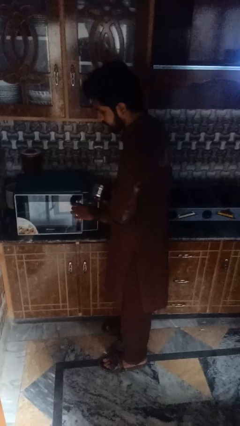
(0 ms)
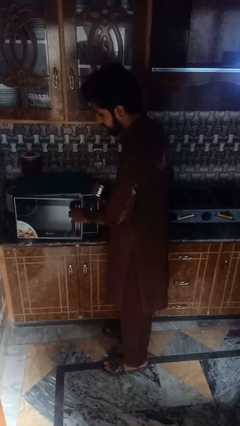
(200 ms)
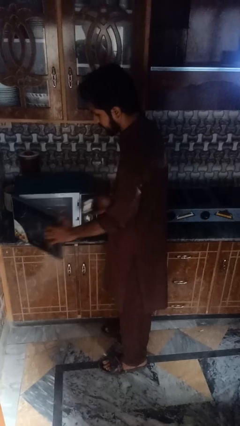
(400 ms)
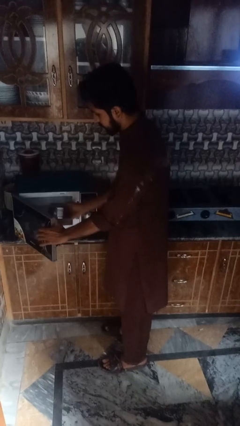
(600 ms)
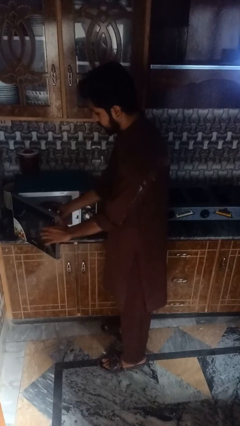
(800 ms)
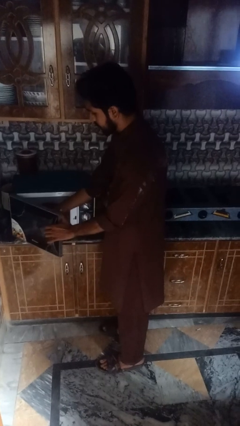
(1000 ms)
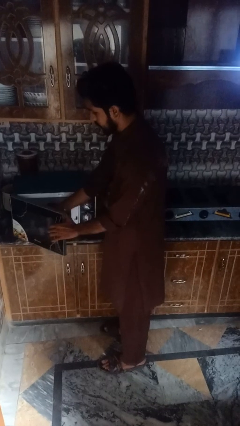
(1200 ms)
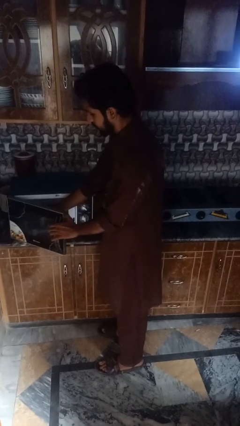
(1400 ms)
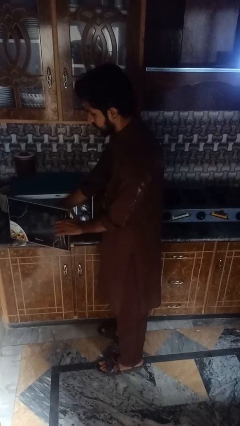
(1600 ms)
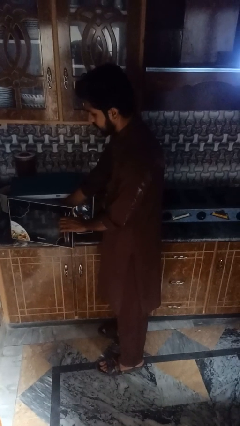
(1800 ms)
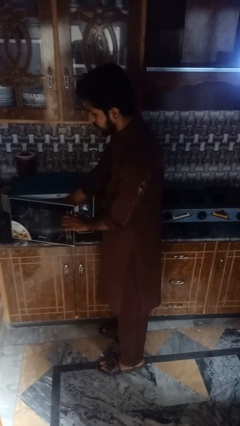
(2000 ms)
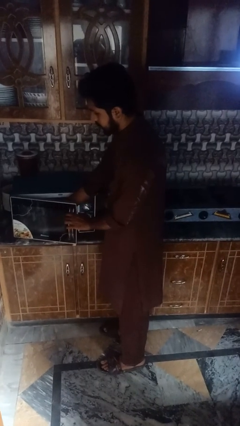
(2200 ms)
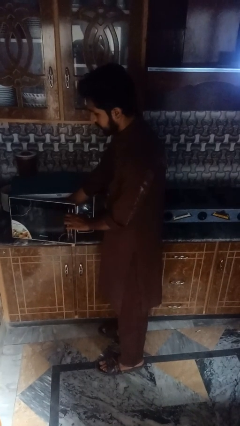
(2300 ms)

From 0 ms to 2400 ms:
person puts object into microwave

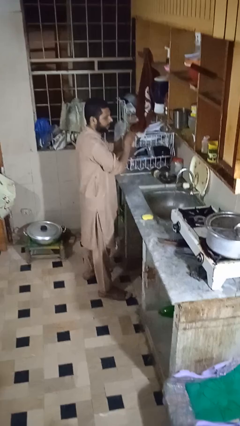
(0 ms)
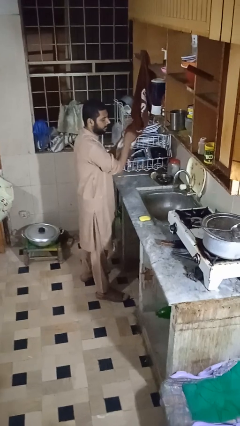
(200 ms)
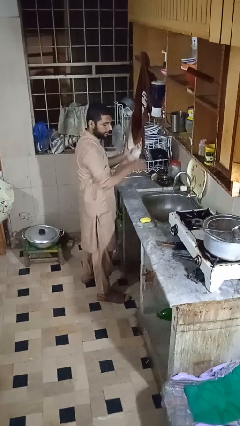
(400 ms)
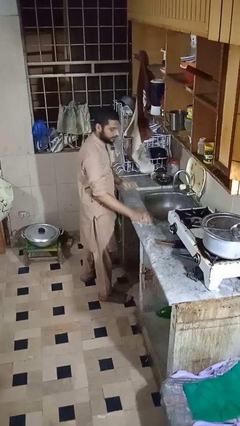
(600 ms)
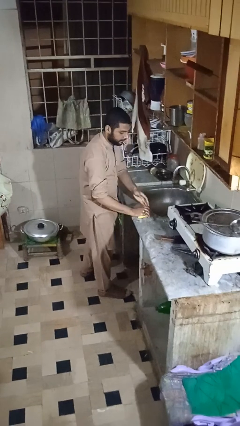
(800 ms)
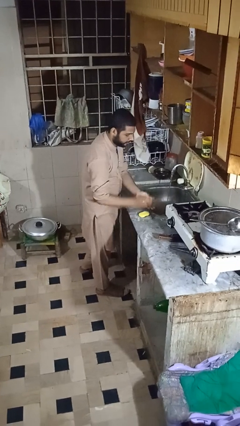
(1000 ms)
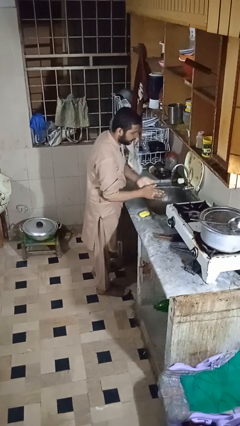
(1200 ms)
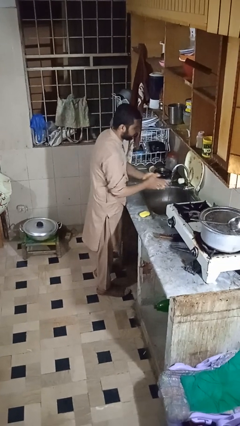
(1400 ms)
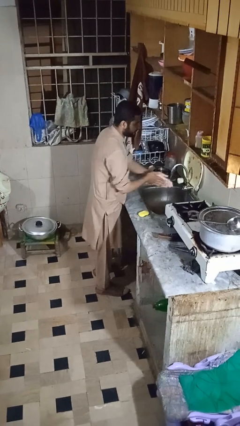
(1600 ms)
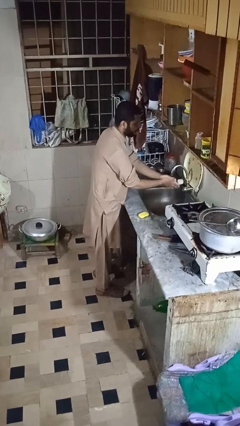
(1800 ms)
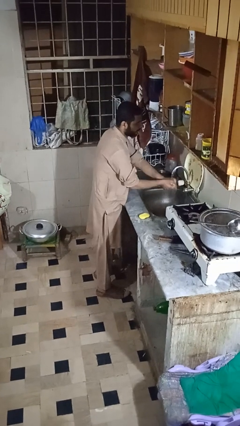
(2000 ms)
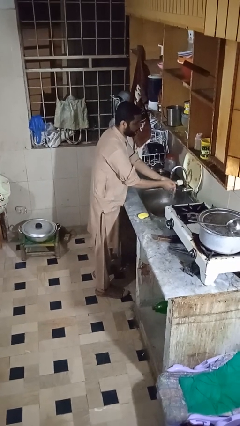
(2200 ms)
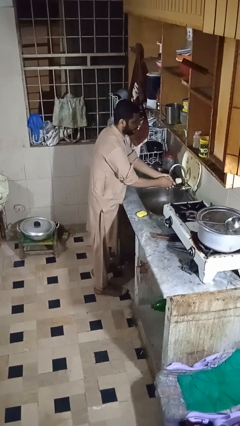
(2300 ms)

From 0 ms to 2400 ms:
person washes hands

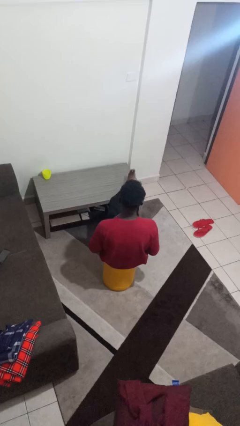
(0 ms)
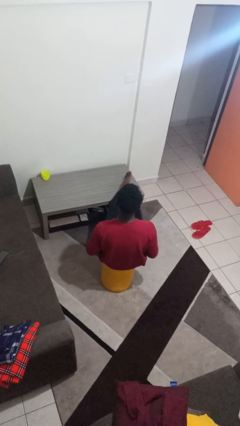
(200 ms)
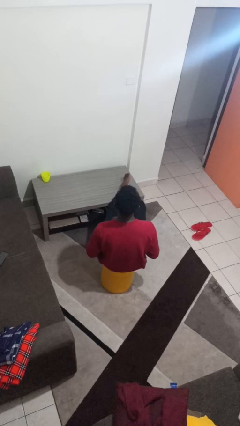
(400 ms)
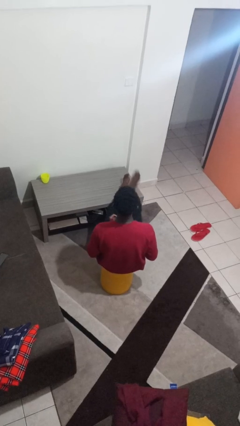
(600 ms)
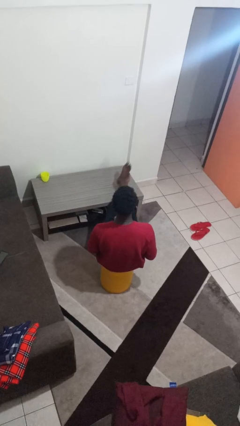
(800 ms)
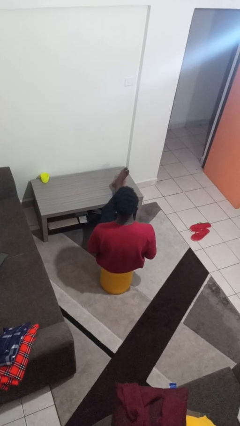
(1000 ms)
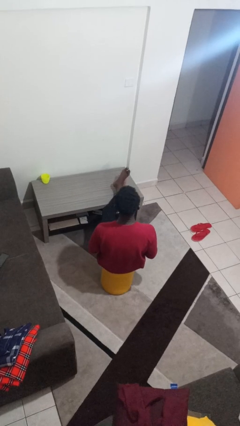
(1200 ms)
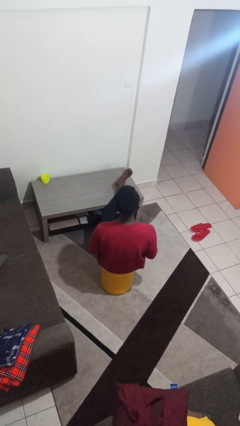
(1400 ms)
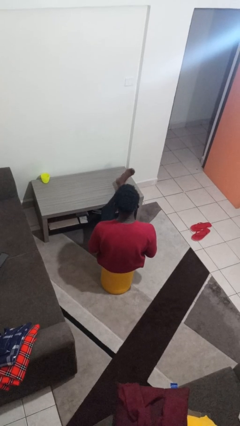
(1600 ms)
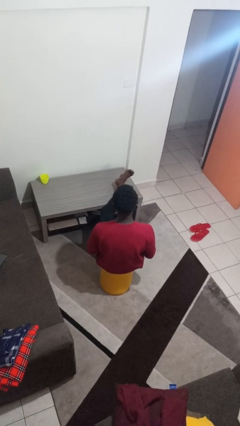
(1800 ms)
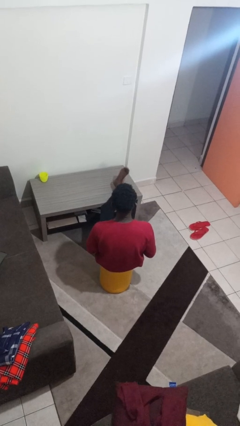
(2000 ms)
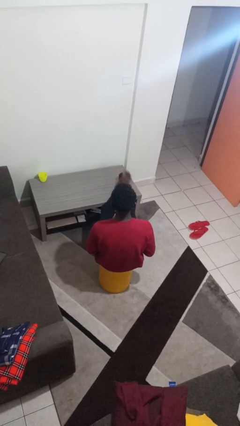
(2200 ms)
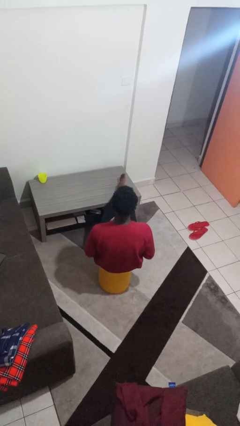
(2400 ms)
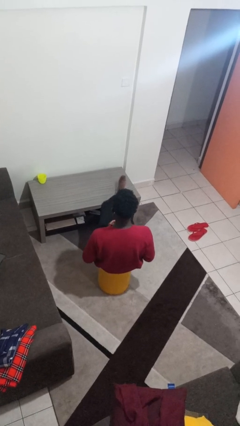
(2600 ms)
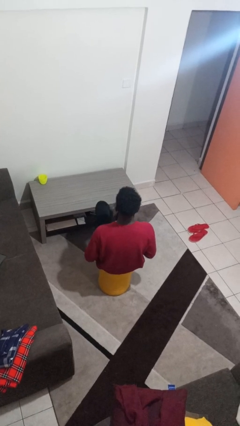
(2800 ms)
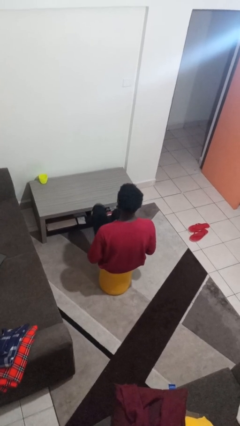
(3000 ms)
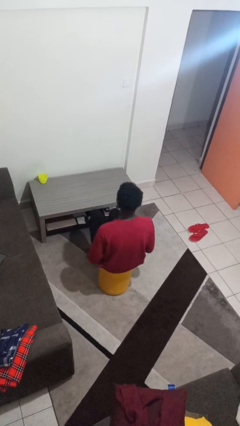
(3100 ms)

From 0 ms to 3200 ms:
person puts feet up

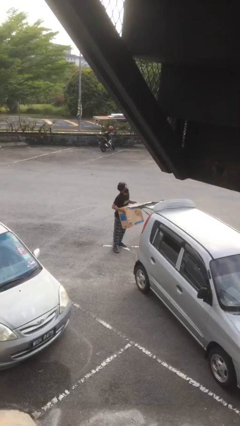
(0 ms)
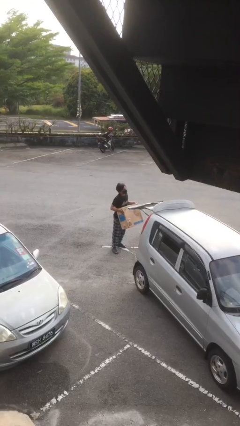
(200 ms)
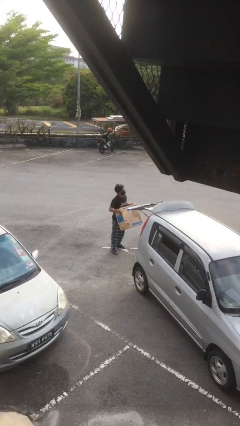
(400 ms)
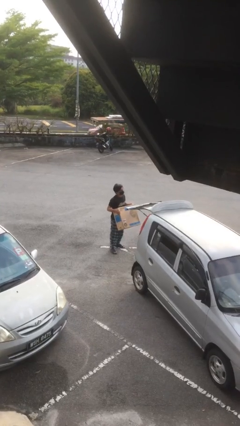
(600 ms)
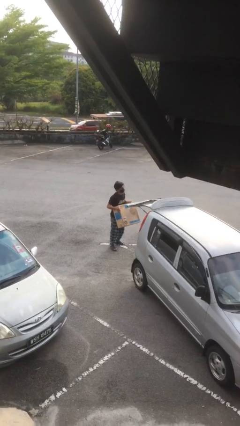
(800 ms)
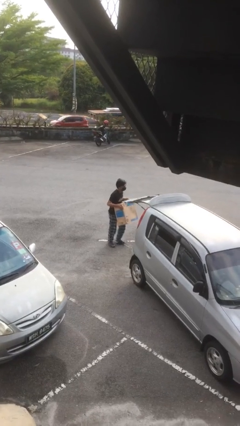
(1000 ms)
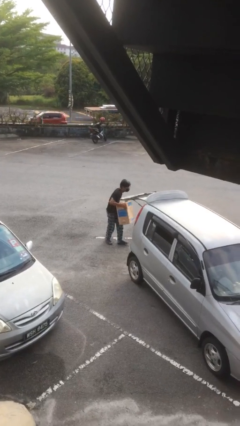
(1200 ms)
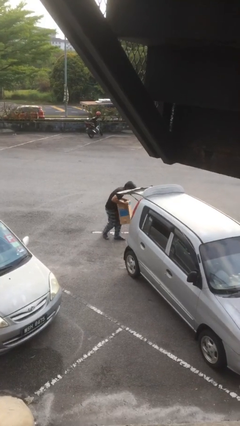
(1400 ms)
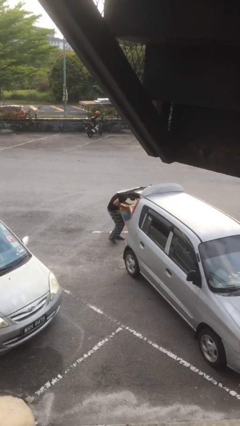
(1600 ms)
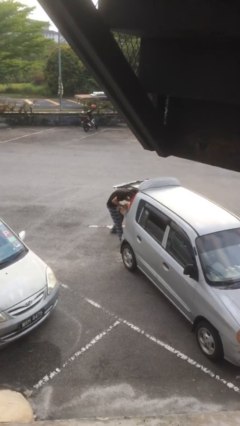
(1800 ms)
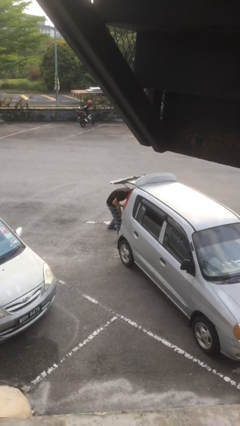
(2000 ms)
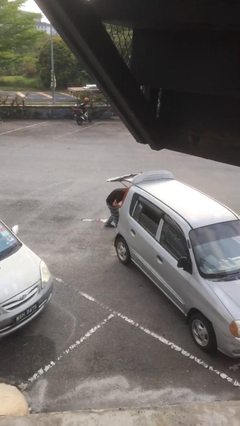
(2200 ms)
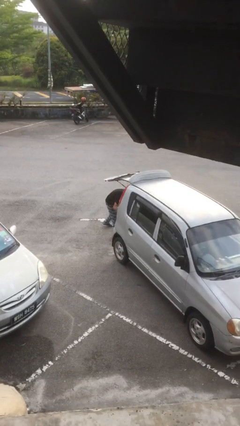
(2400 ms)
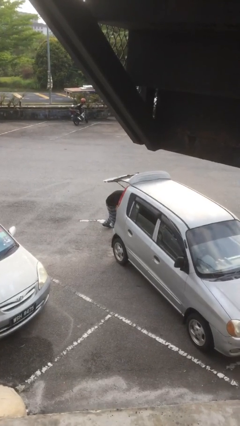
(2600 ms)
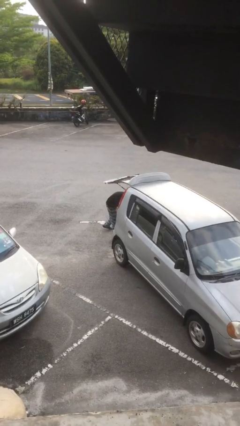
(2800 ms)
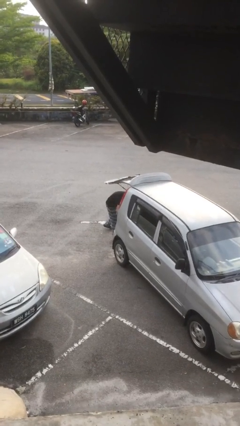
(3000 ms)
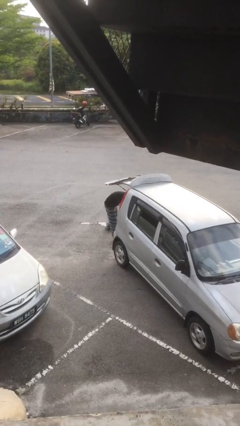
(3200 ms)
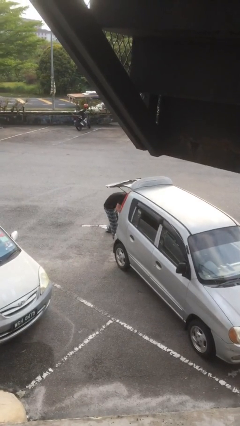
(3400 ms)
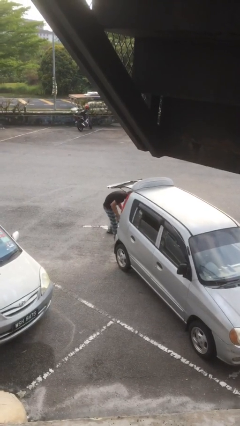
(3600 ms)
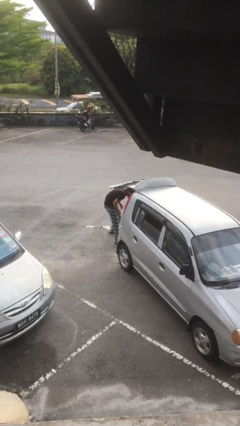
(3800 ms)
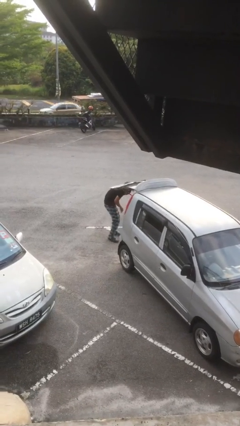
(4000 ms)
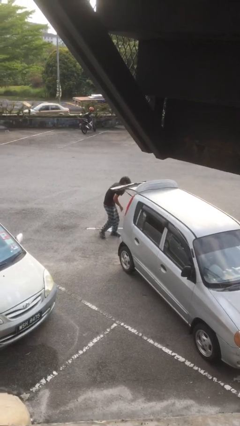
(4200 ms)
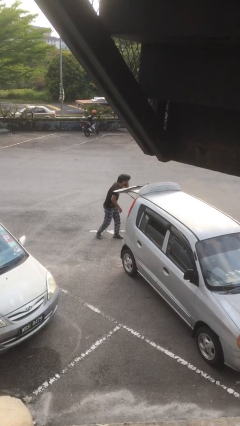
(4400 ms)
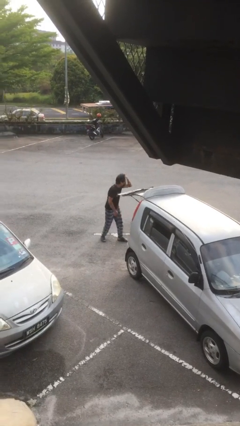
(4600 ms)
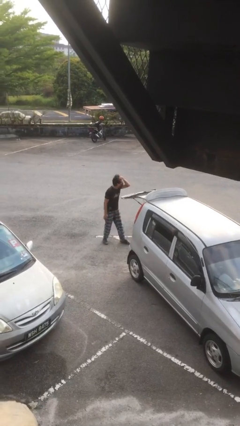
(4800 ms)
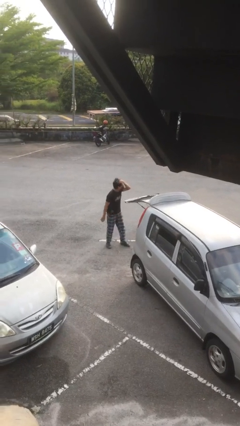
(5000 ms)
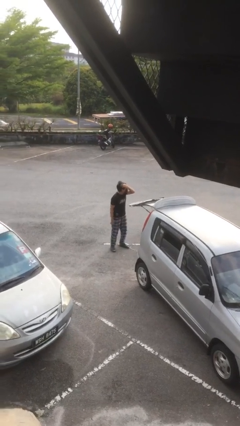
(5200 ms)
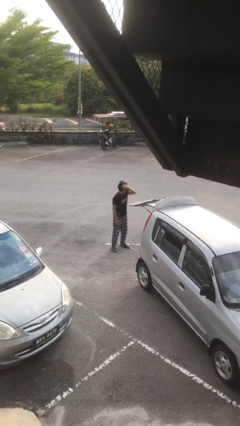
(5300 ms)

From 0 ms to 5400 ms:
person loads car

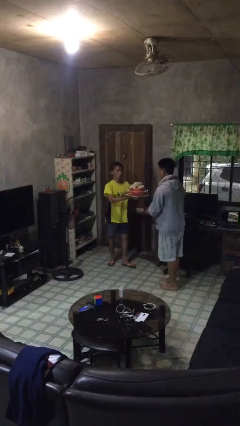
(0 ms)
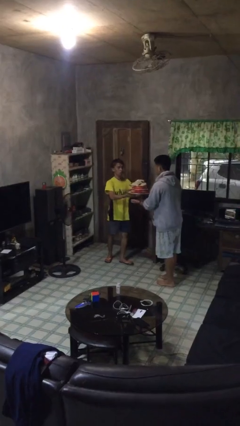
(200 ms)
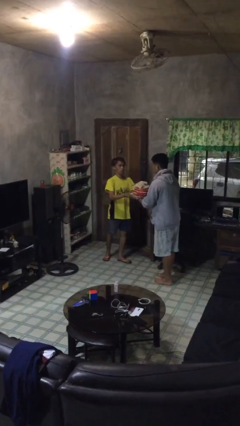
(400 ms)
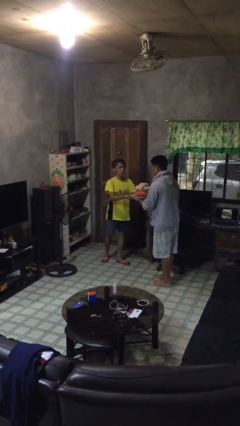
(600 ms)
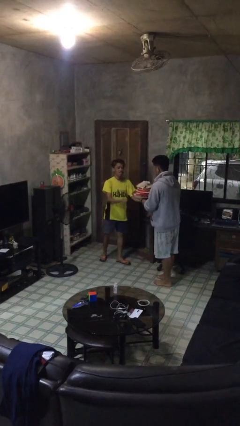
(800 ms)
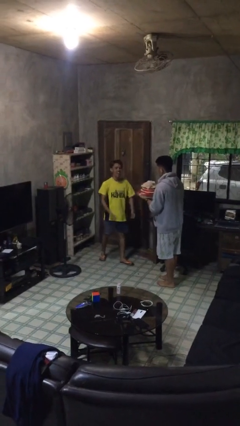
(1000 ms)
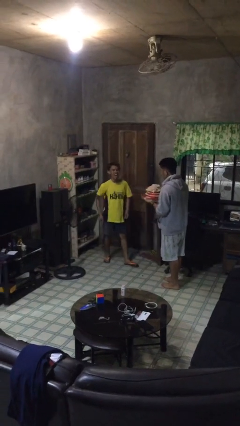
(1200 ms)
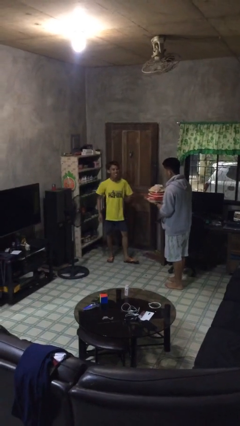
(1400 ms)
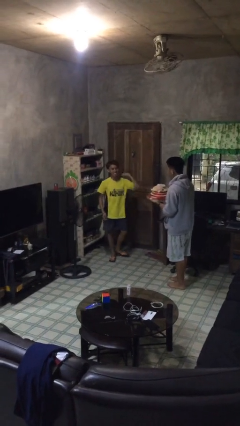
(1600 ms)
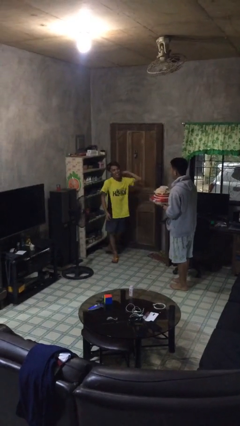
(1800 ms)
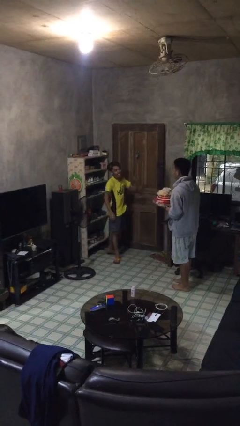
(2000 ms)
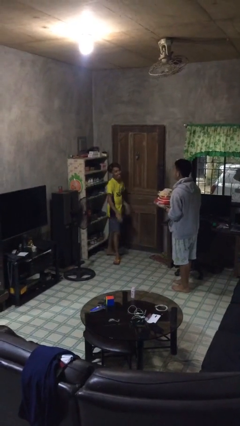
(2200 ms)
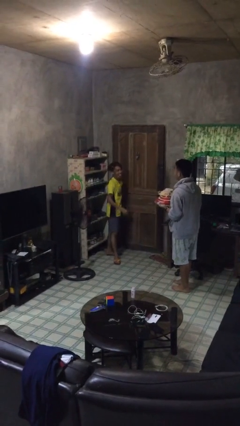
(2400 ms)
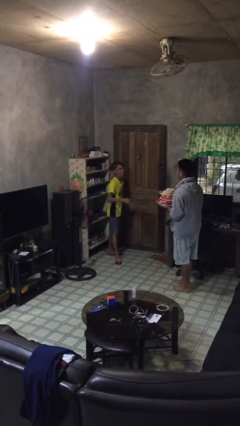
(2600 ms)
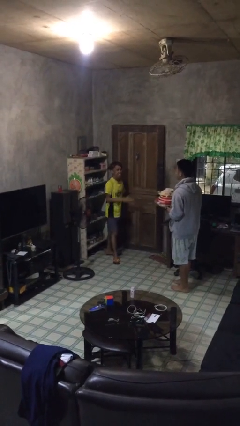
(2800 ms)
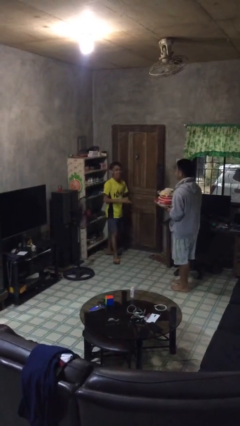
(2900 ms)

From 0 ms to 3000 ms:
person transfers object to person

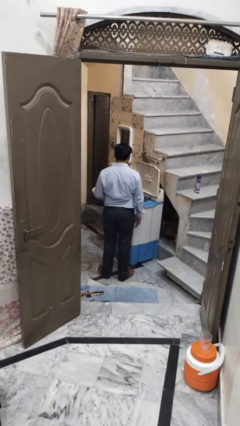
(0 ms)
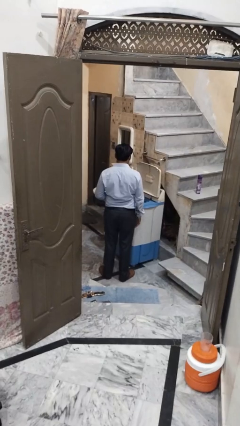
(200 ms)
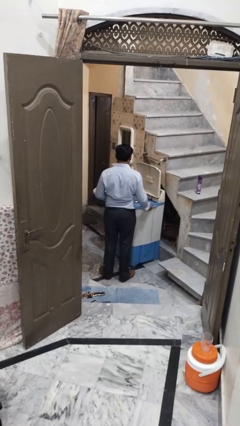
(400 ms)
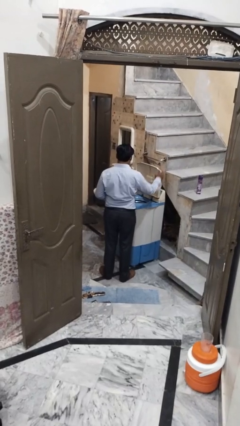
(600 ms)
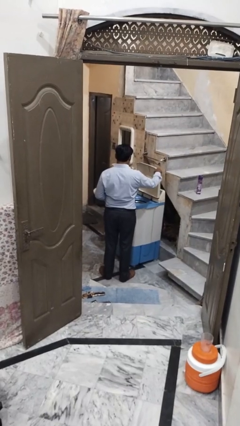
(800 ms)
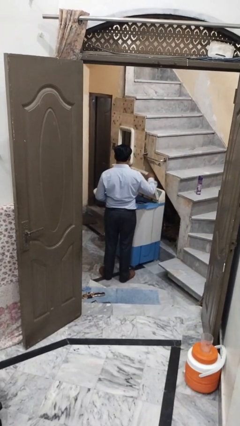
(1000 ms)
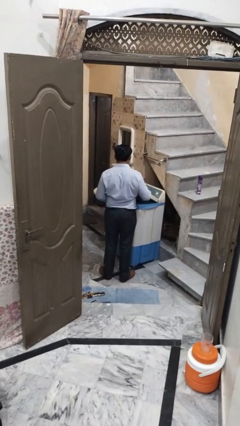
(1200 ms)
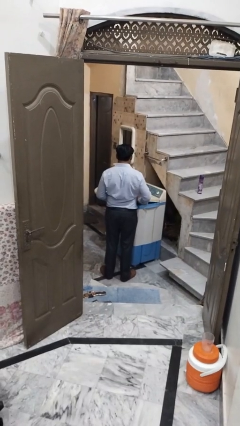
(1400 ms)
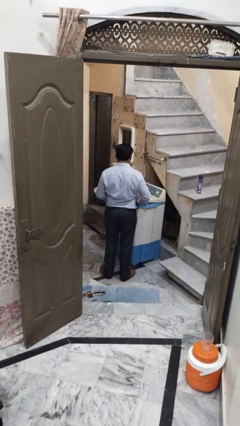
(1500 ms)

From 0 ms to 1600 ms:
person closes clothes washer
